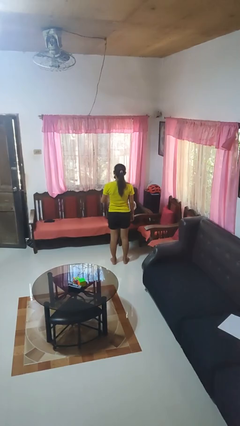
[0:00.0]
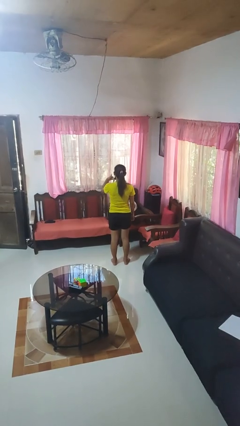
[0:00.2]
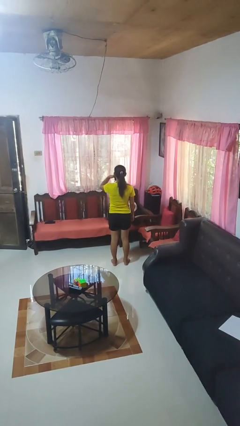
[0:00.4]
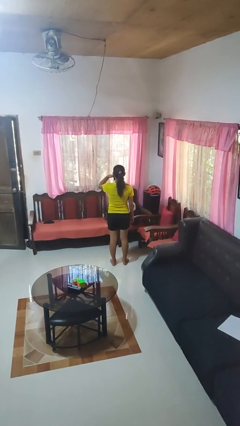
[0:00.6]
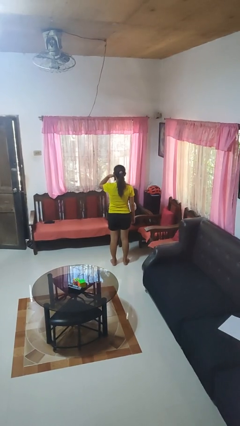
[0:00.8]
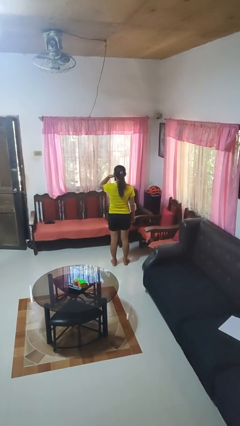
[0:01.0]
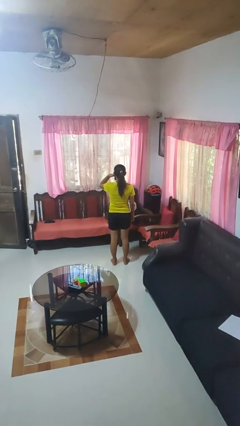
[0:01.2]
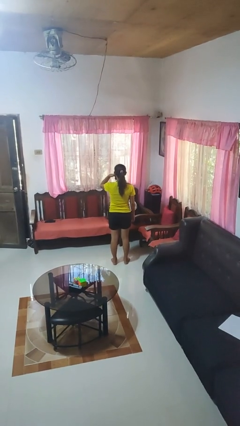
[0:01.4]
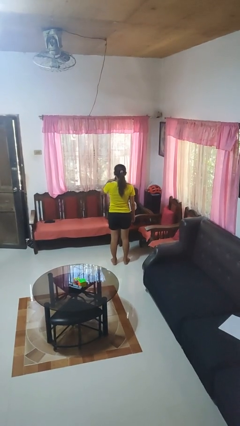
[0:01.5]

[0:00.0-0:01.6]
person gestures call me

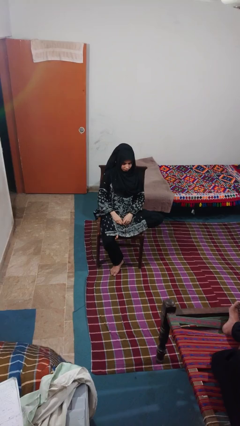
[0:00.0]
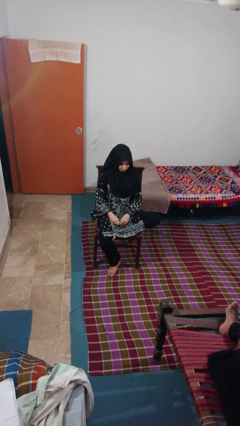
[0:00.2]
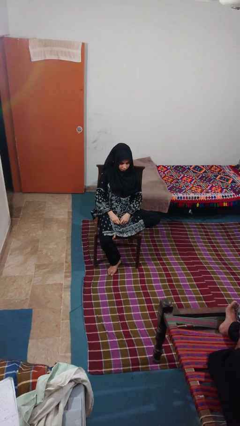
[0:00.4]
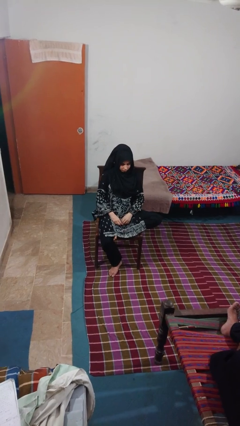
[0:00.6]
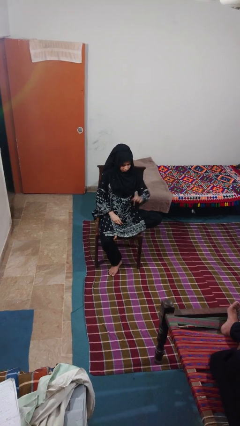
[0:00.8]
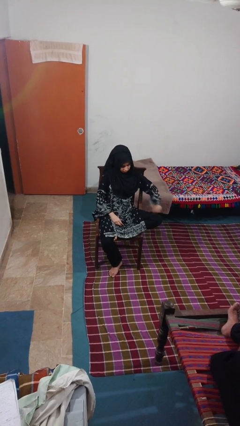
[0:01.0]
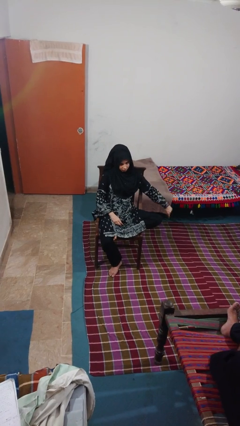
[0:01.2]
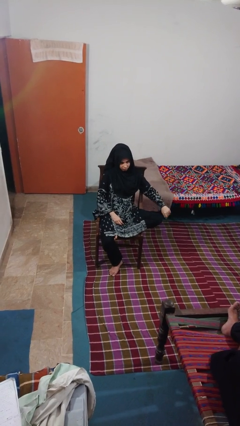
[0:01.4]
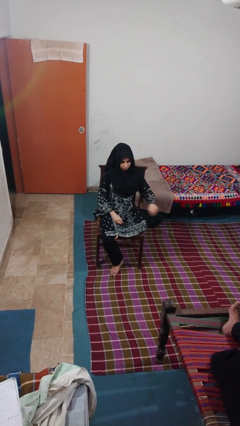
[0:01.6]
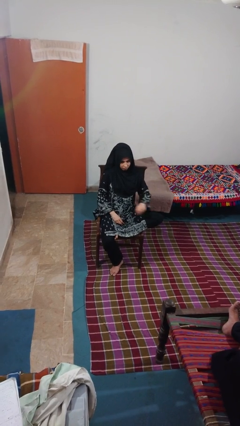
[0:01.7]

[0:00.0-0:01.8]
person swats bug

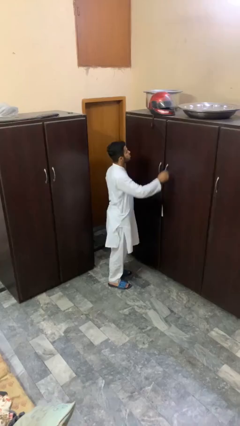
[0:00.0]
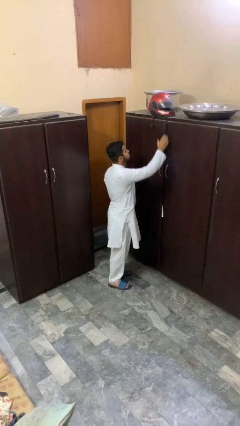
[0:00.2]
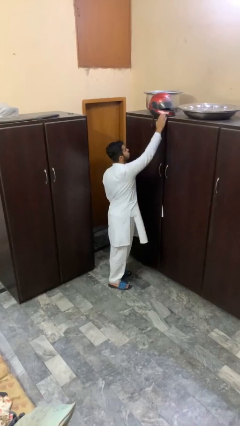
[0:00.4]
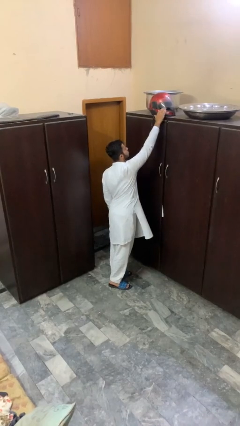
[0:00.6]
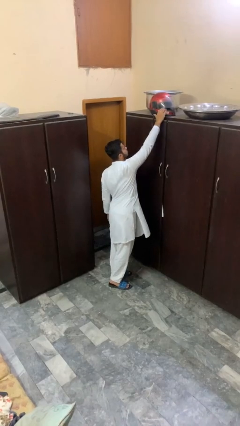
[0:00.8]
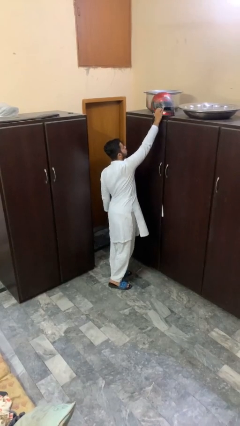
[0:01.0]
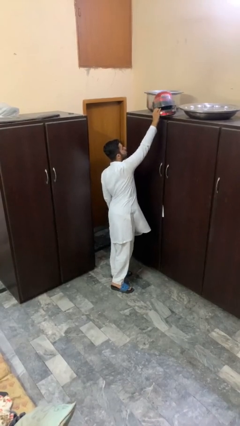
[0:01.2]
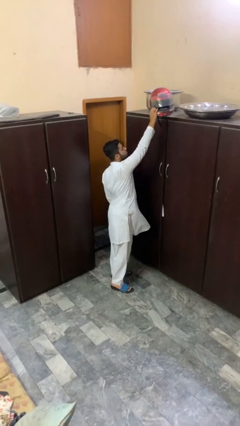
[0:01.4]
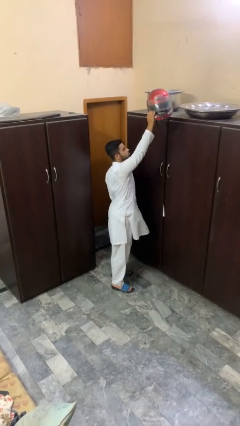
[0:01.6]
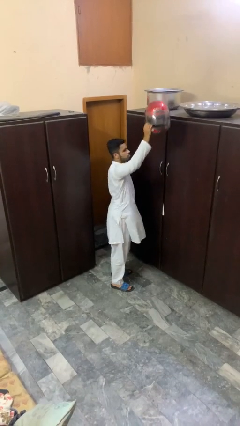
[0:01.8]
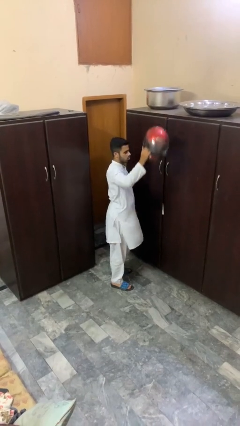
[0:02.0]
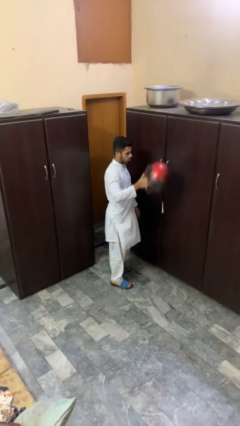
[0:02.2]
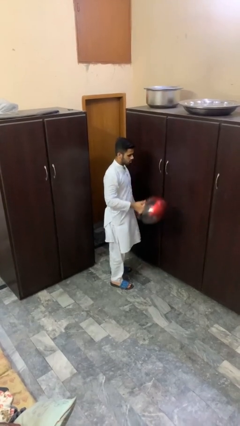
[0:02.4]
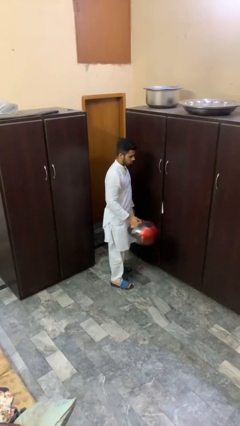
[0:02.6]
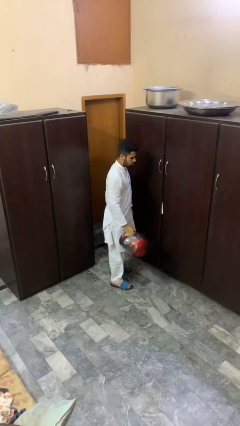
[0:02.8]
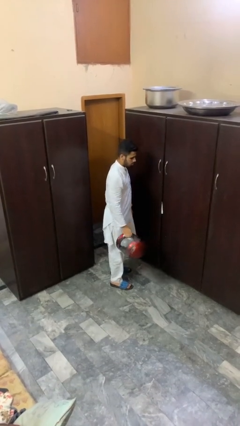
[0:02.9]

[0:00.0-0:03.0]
person picks up object from shelf

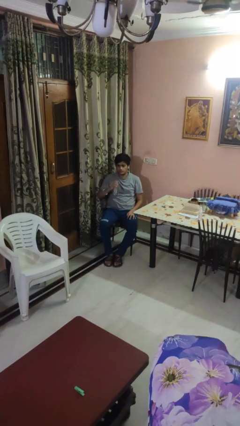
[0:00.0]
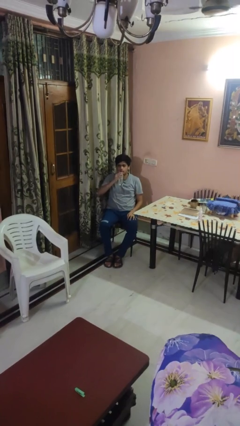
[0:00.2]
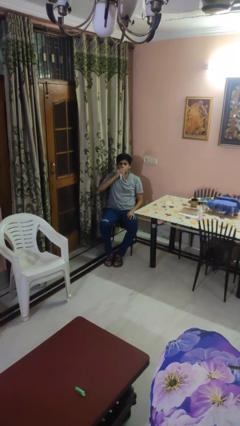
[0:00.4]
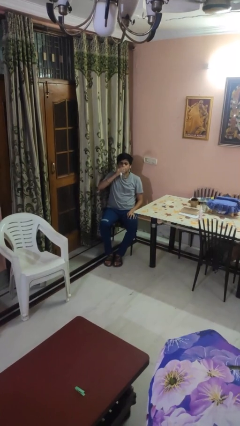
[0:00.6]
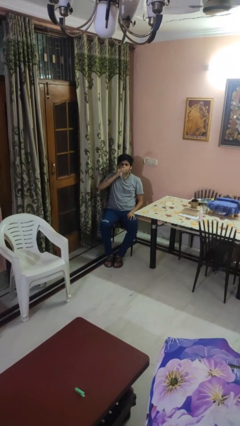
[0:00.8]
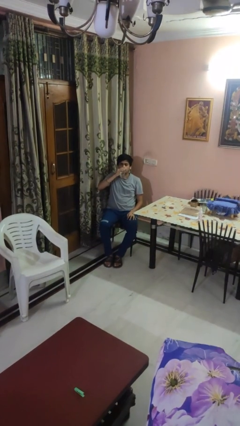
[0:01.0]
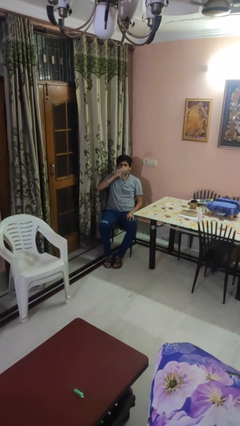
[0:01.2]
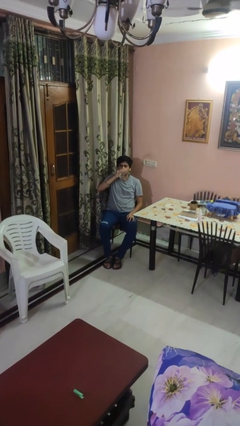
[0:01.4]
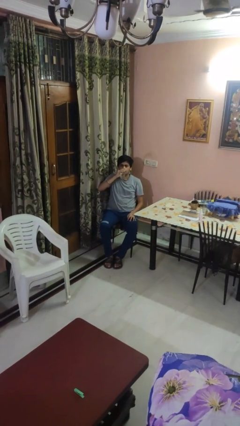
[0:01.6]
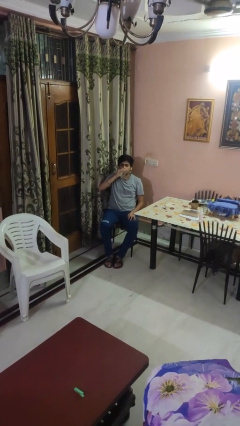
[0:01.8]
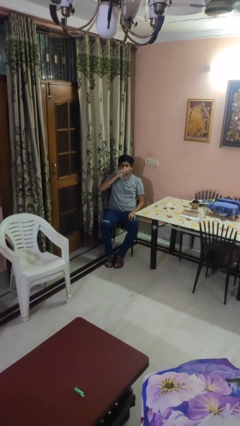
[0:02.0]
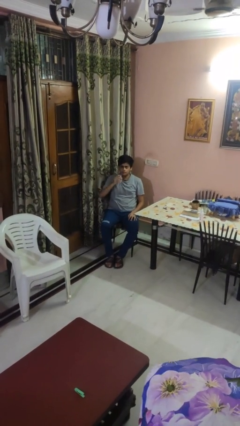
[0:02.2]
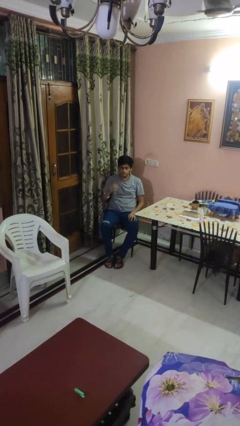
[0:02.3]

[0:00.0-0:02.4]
person drinks from bottle

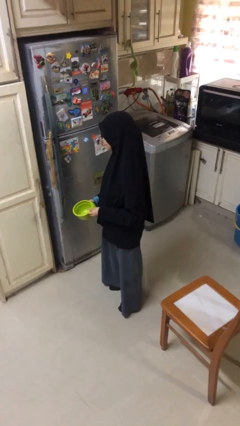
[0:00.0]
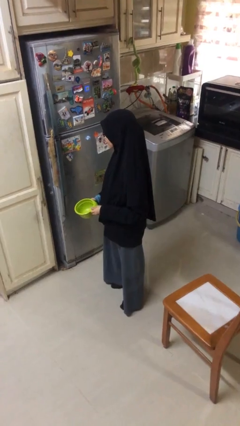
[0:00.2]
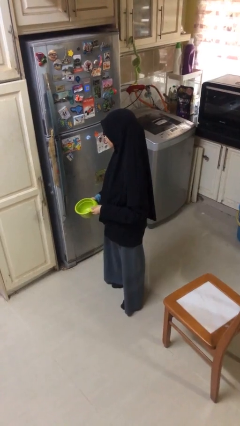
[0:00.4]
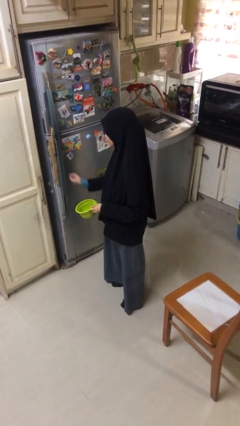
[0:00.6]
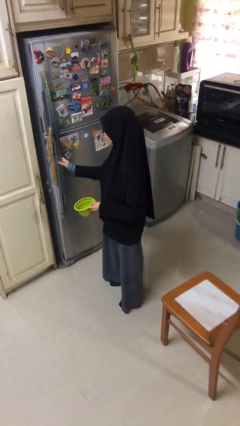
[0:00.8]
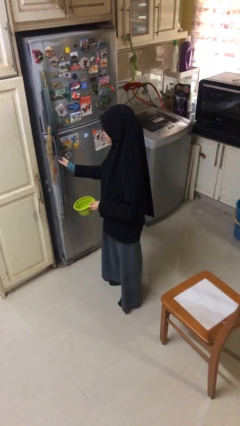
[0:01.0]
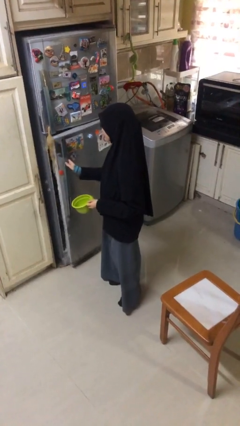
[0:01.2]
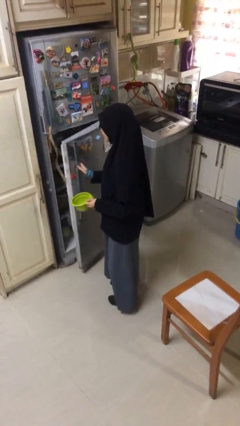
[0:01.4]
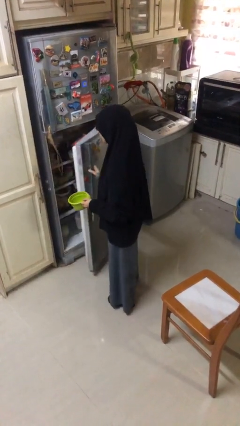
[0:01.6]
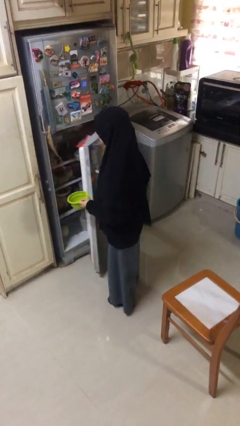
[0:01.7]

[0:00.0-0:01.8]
person opens refrigerator

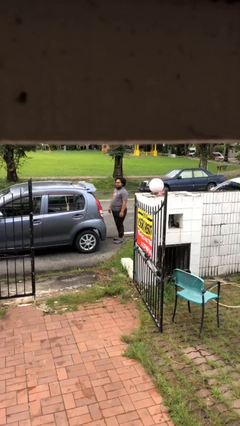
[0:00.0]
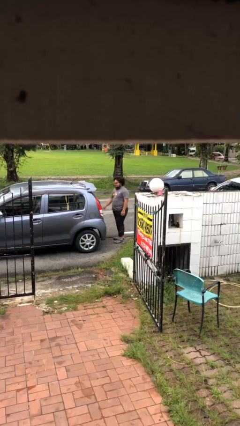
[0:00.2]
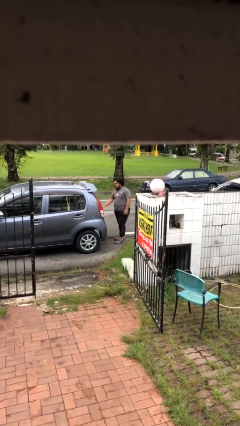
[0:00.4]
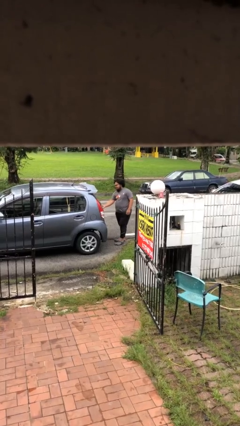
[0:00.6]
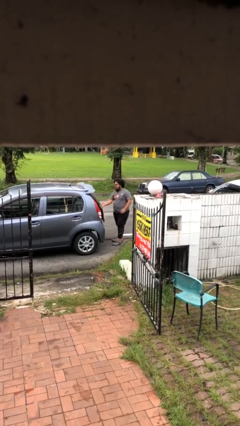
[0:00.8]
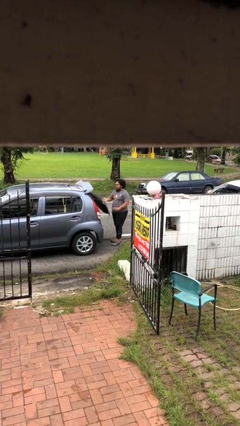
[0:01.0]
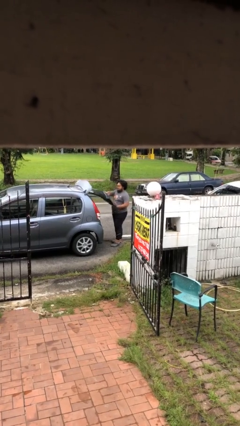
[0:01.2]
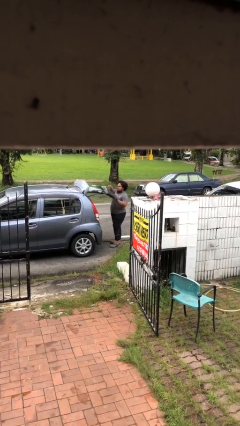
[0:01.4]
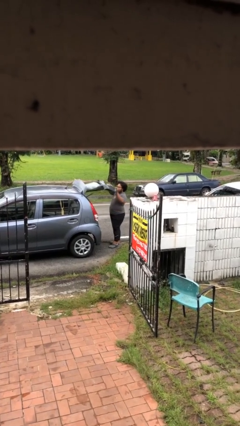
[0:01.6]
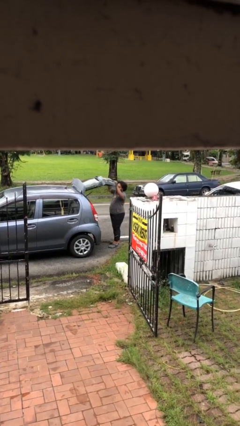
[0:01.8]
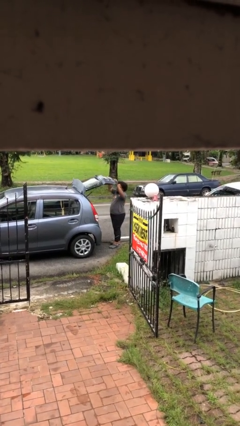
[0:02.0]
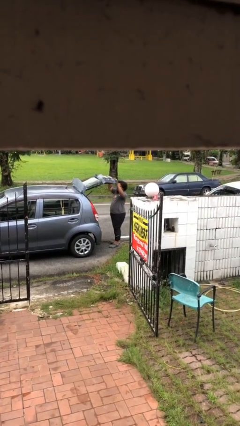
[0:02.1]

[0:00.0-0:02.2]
person opens car trunk

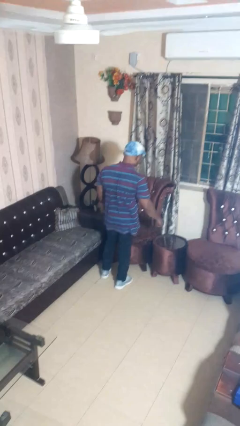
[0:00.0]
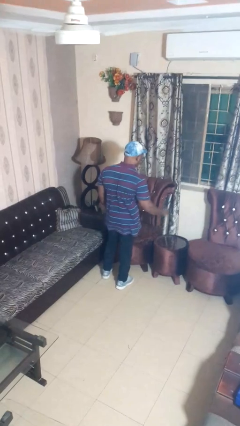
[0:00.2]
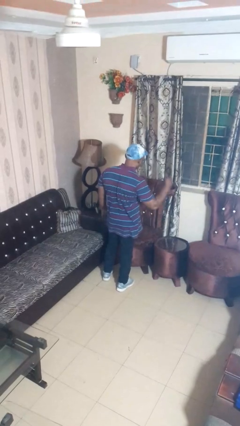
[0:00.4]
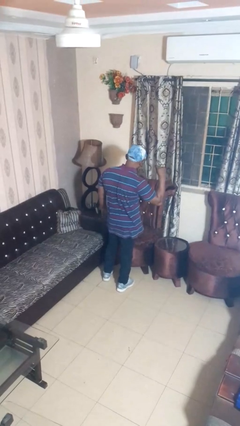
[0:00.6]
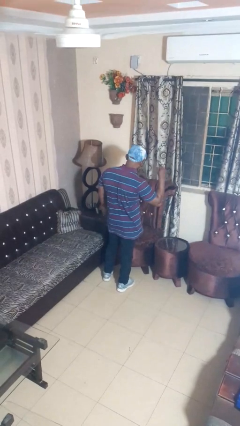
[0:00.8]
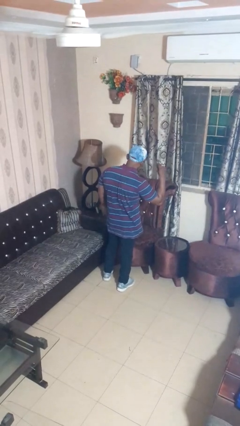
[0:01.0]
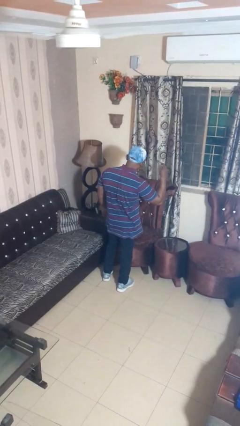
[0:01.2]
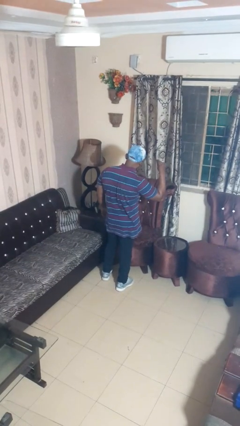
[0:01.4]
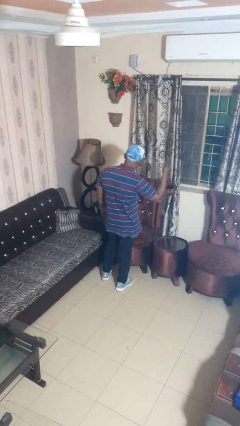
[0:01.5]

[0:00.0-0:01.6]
person snaps fingers

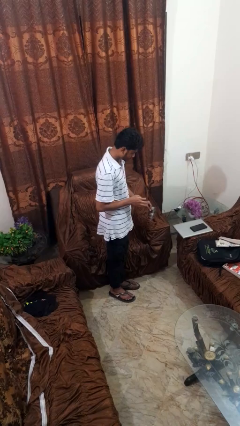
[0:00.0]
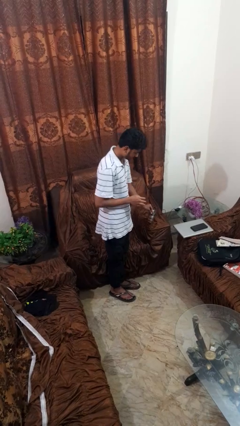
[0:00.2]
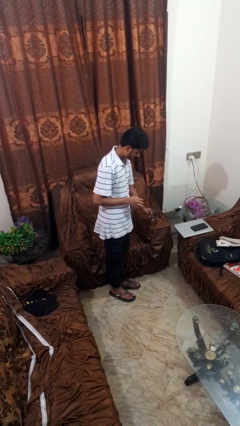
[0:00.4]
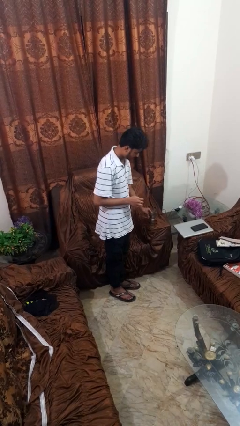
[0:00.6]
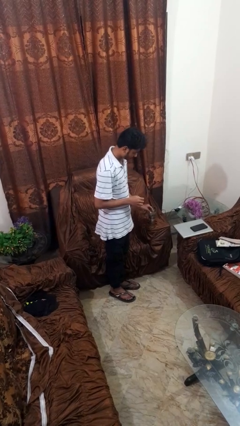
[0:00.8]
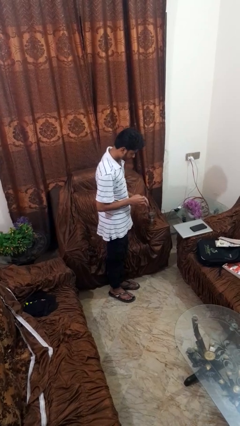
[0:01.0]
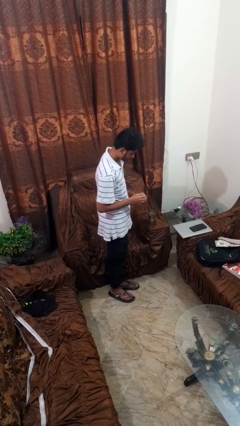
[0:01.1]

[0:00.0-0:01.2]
person puts down object on couch

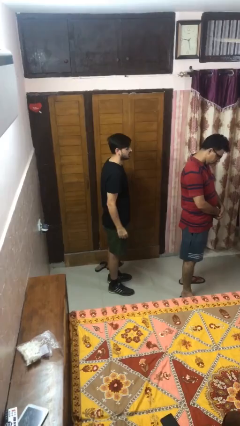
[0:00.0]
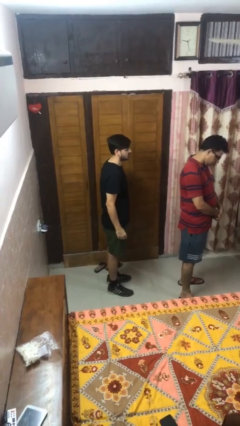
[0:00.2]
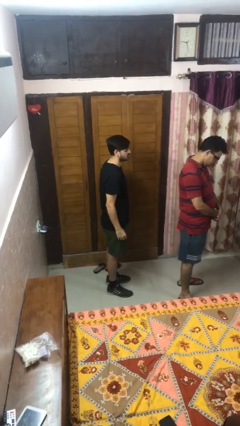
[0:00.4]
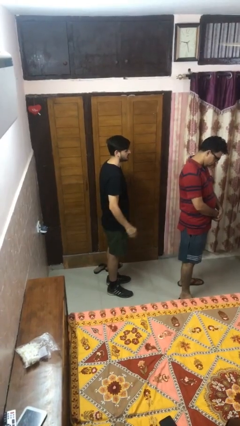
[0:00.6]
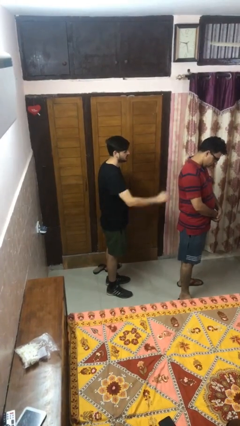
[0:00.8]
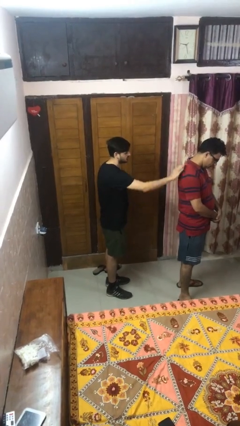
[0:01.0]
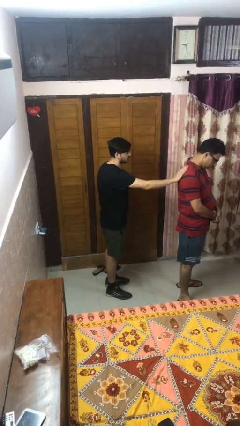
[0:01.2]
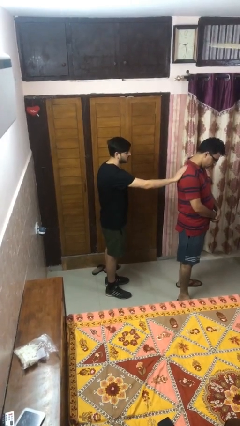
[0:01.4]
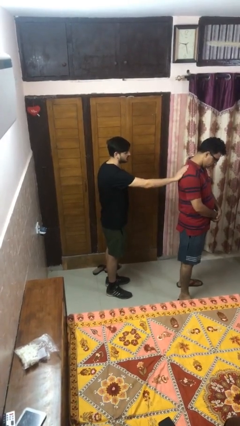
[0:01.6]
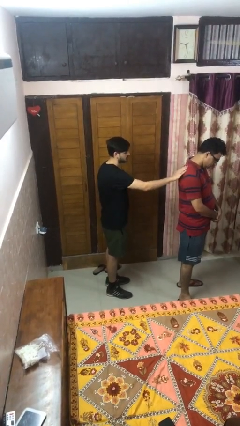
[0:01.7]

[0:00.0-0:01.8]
person touches back of person
